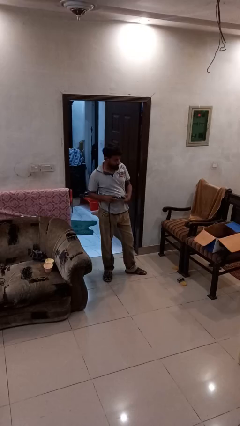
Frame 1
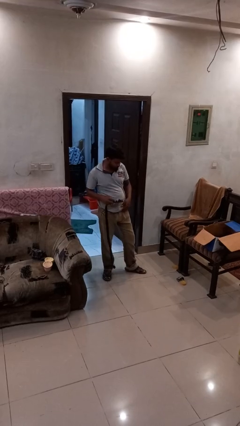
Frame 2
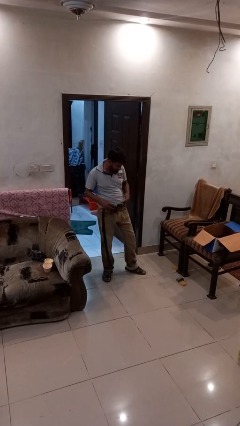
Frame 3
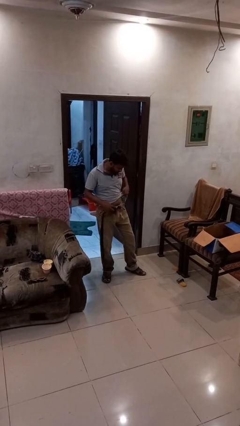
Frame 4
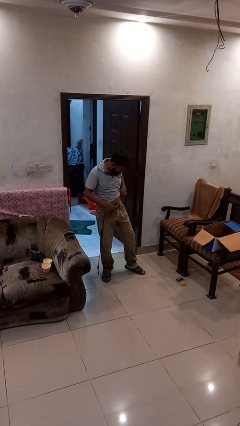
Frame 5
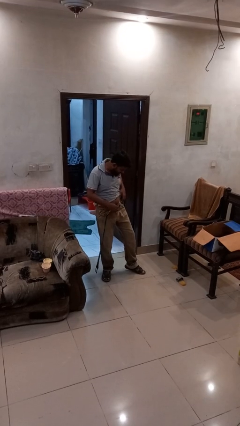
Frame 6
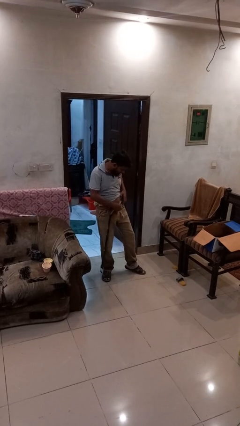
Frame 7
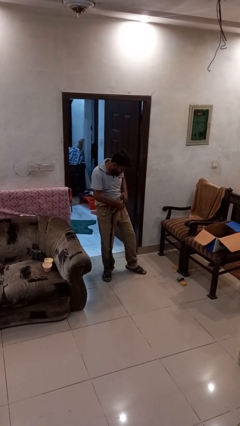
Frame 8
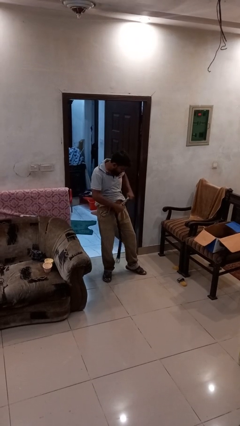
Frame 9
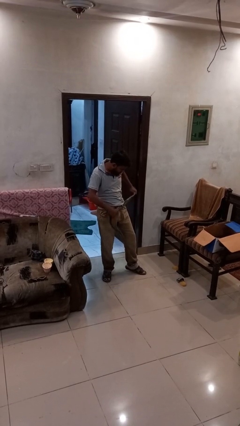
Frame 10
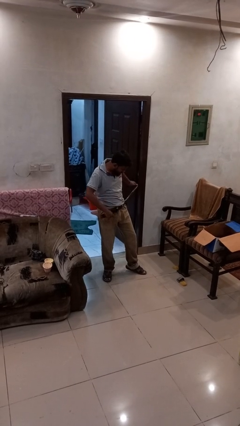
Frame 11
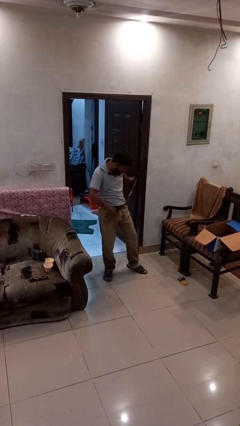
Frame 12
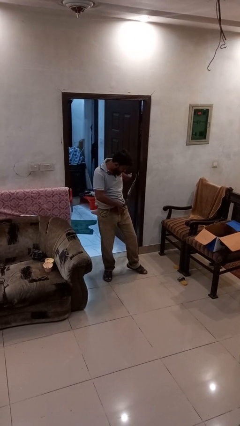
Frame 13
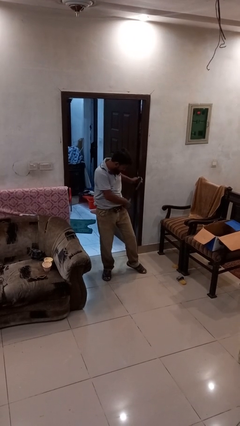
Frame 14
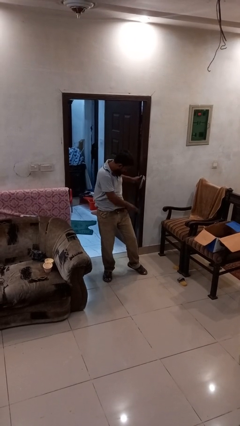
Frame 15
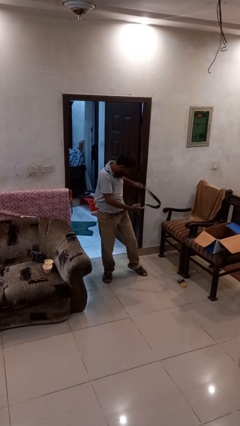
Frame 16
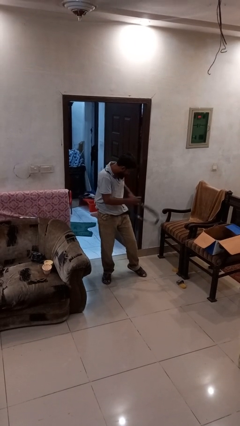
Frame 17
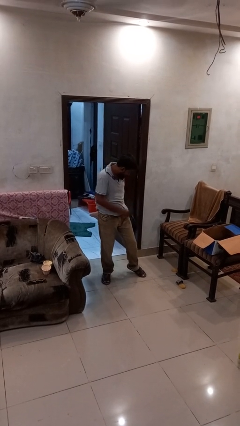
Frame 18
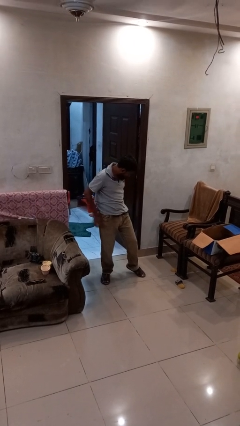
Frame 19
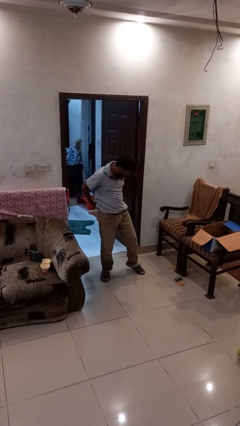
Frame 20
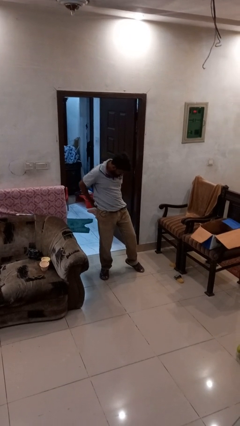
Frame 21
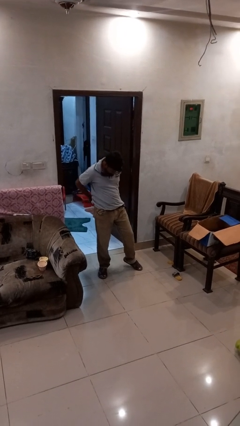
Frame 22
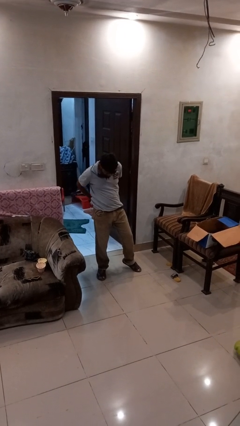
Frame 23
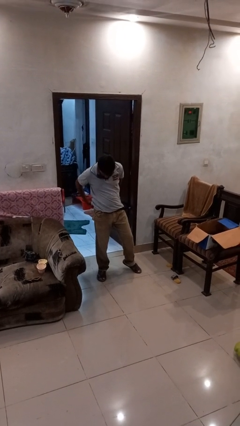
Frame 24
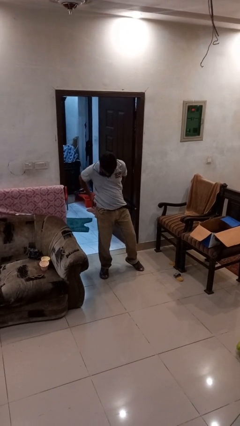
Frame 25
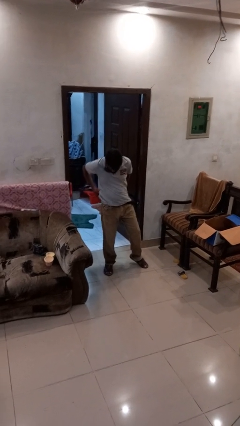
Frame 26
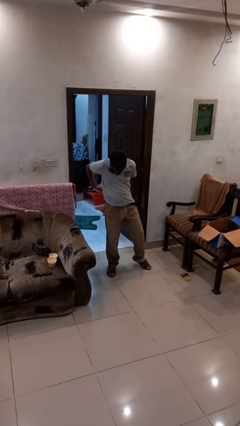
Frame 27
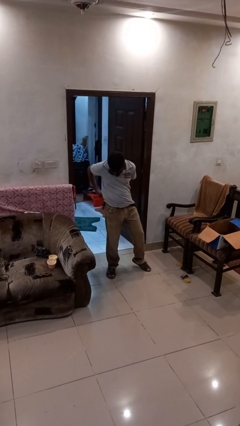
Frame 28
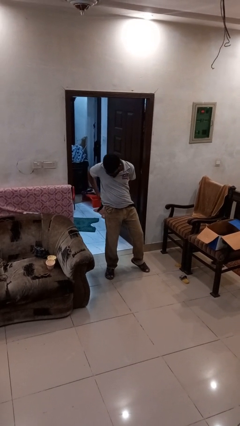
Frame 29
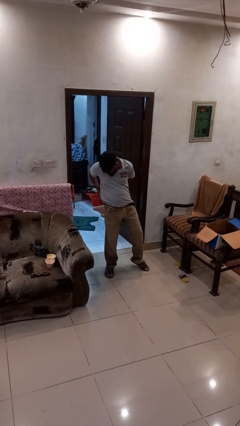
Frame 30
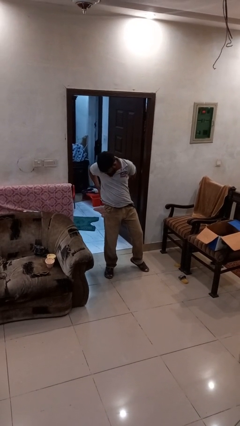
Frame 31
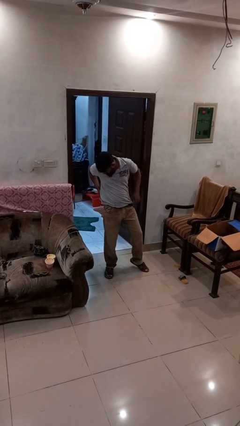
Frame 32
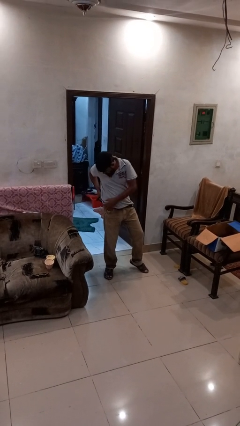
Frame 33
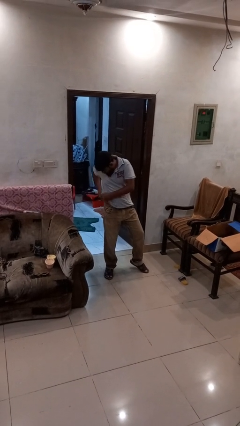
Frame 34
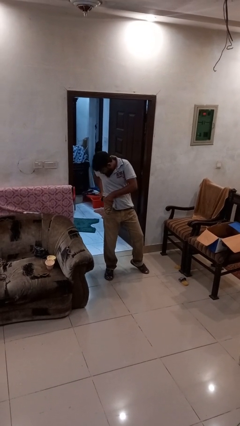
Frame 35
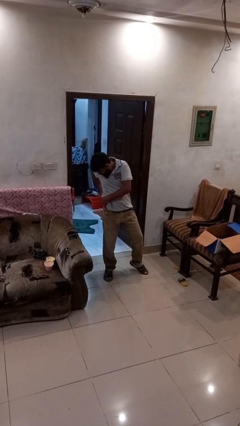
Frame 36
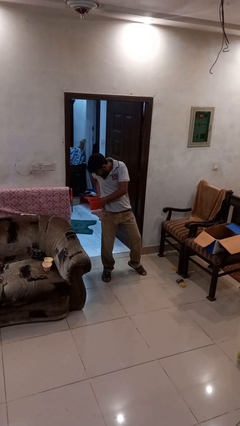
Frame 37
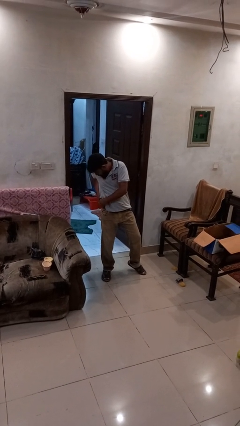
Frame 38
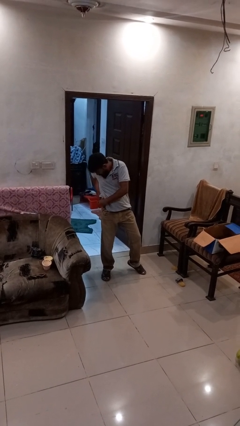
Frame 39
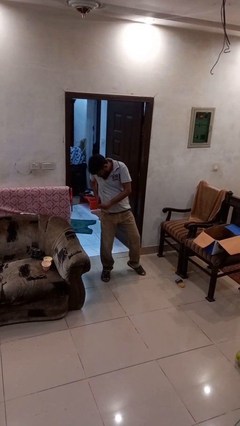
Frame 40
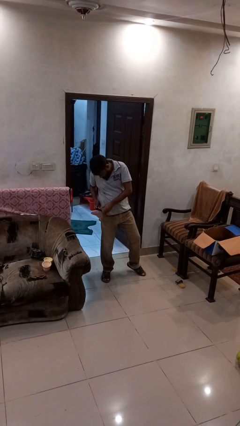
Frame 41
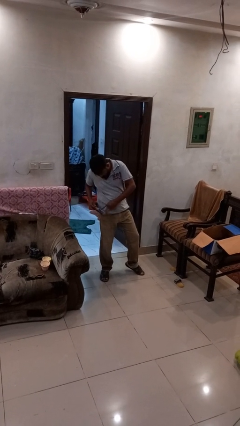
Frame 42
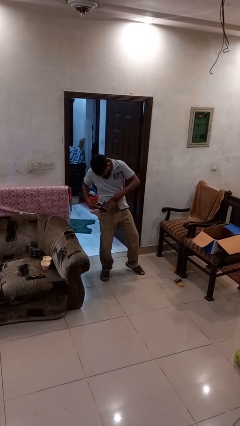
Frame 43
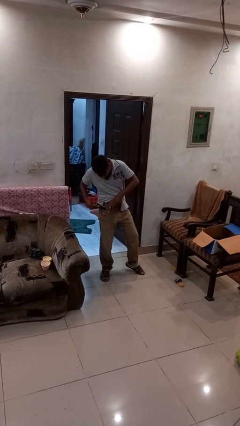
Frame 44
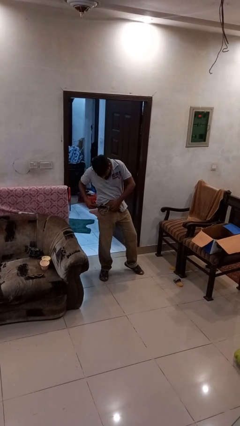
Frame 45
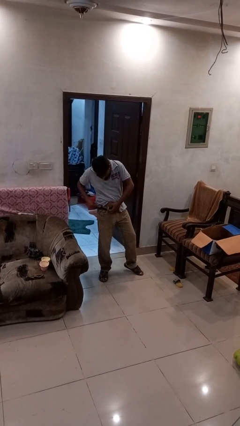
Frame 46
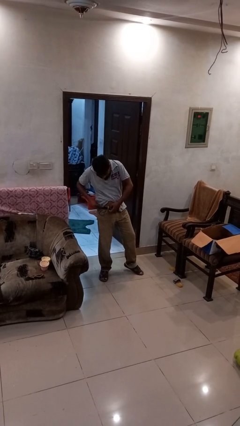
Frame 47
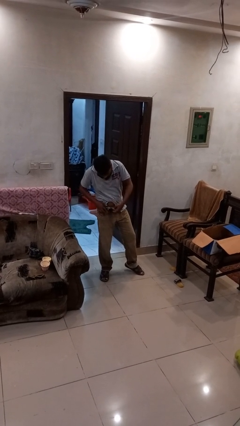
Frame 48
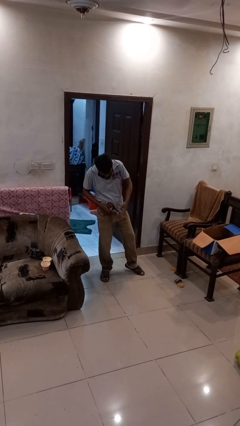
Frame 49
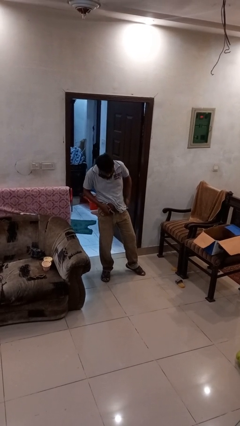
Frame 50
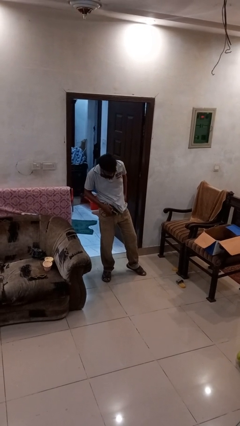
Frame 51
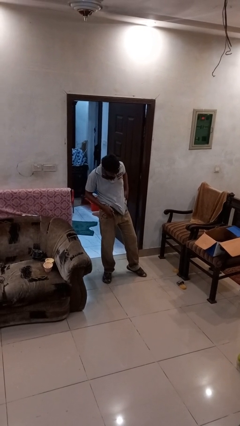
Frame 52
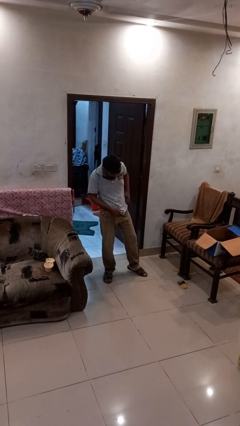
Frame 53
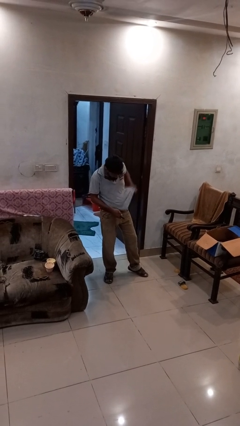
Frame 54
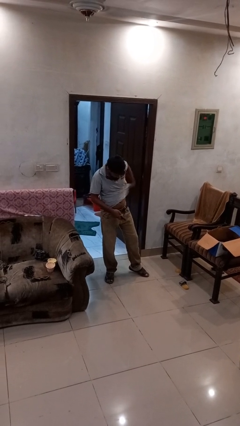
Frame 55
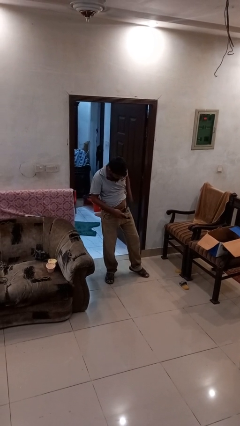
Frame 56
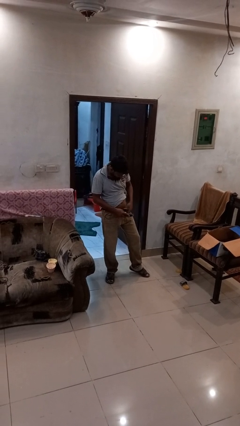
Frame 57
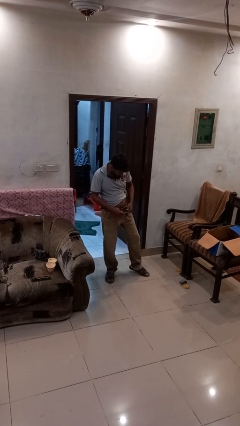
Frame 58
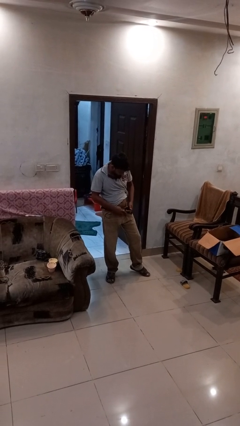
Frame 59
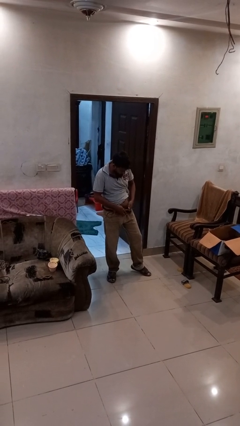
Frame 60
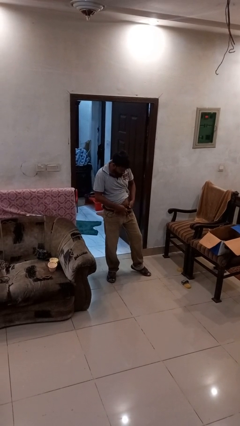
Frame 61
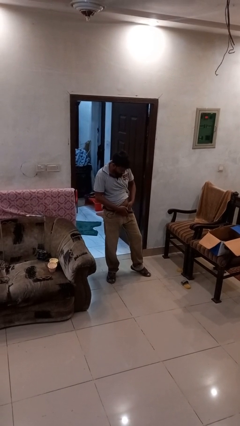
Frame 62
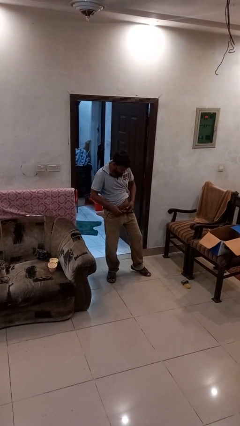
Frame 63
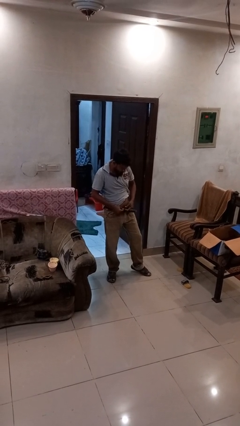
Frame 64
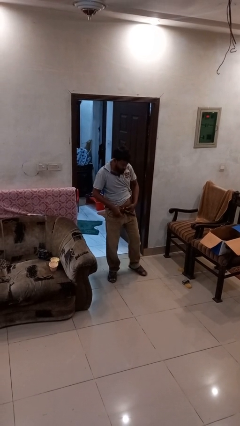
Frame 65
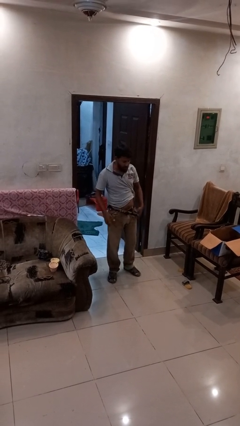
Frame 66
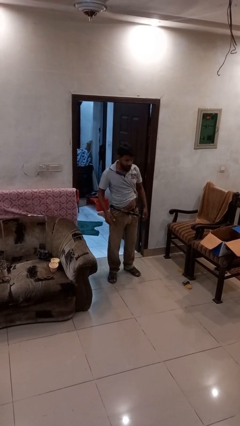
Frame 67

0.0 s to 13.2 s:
person puts on belt

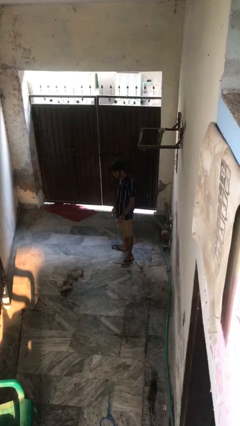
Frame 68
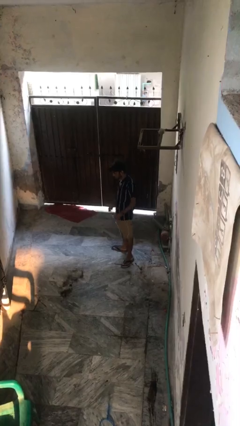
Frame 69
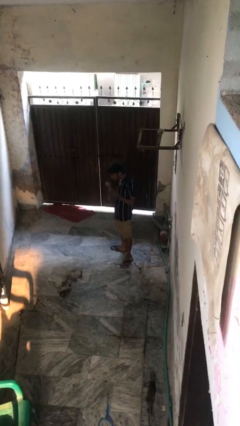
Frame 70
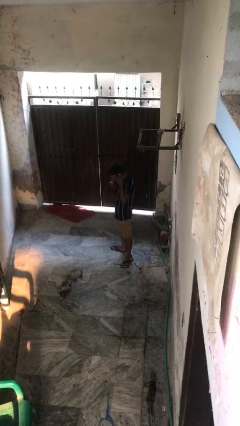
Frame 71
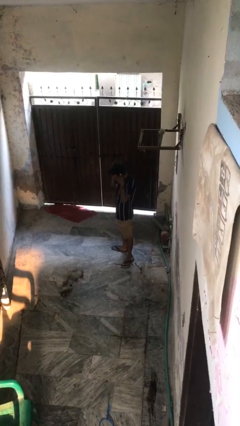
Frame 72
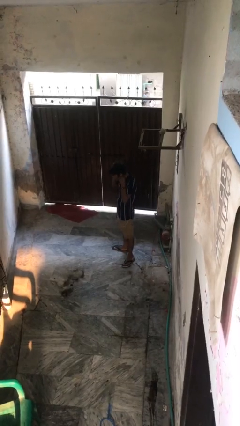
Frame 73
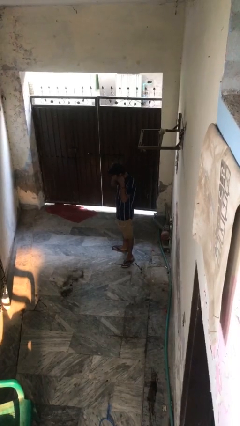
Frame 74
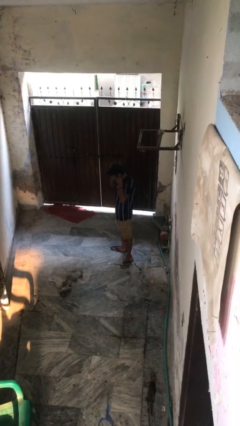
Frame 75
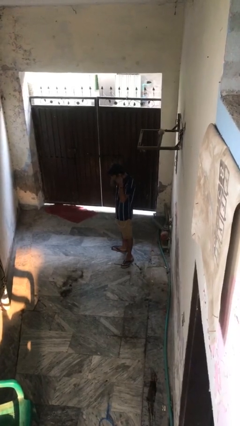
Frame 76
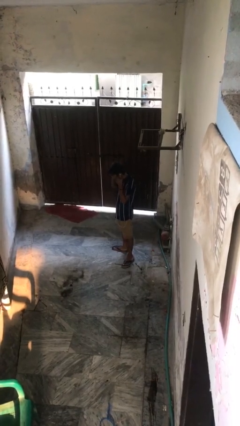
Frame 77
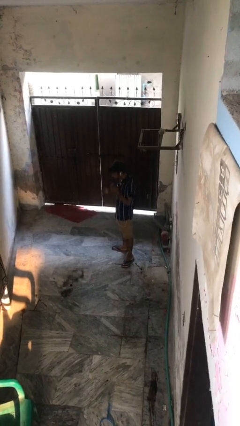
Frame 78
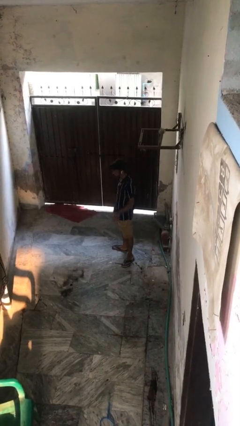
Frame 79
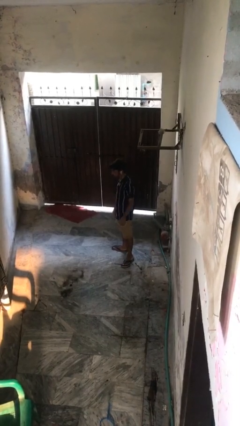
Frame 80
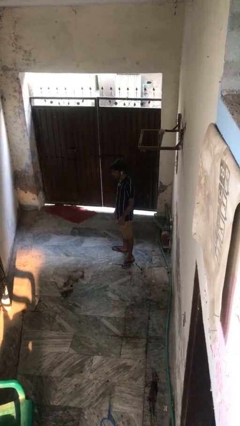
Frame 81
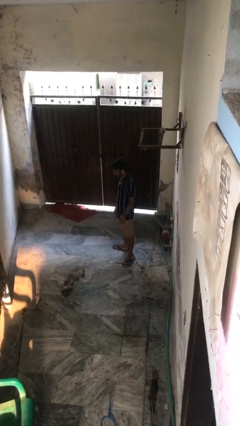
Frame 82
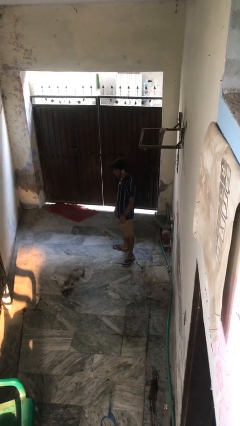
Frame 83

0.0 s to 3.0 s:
person puts on headphones

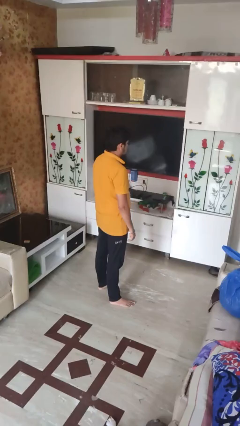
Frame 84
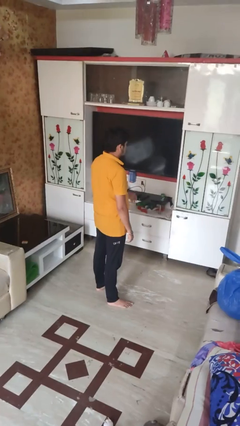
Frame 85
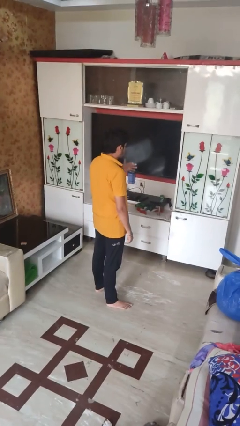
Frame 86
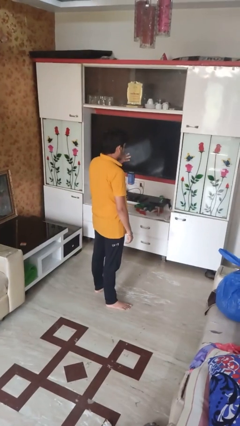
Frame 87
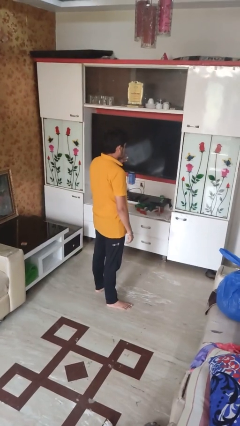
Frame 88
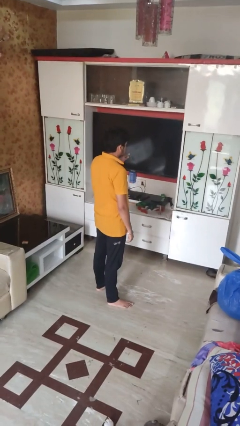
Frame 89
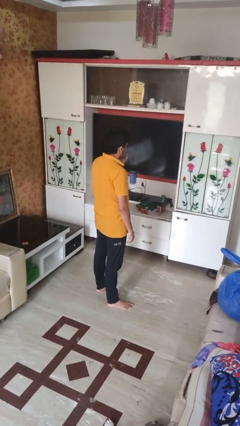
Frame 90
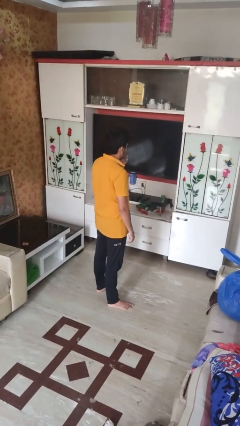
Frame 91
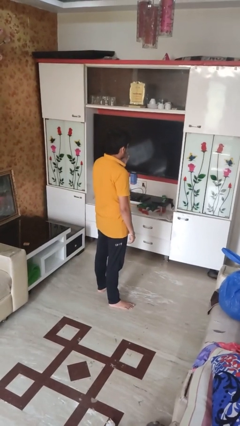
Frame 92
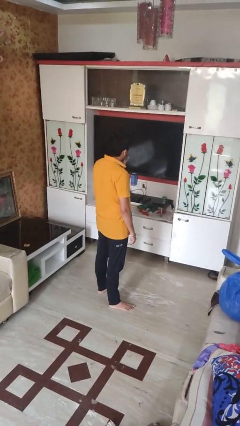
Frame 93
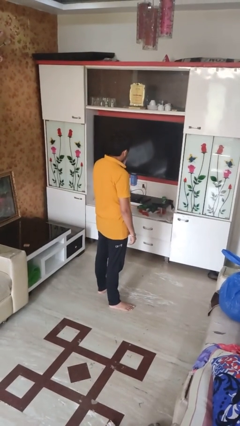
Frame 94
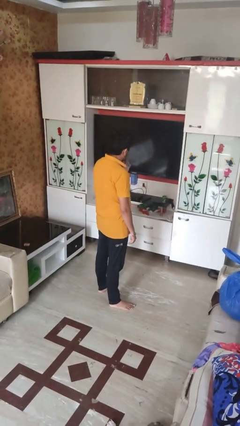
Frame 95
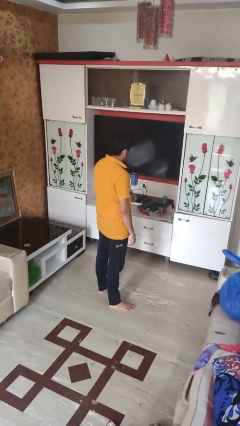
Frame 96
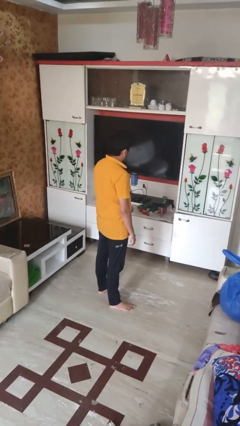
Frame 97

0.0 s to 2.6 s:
person licks fingers
